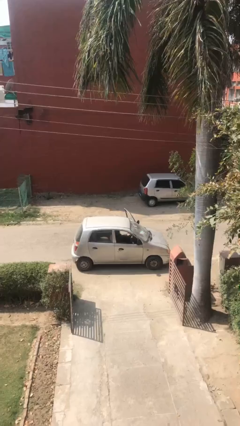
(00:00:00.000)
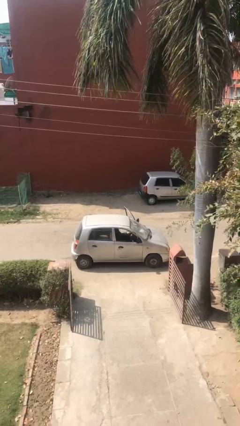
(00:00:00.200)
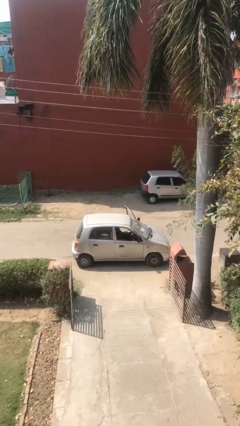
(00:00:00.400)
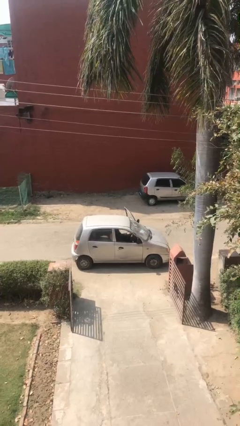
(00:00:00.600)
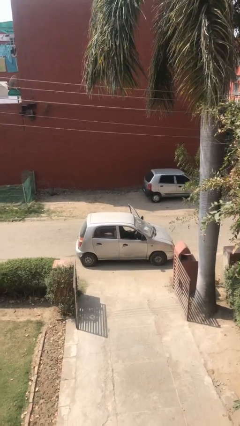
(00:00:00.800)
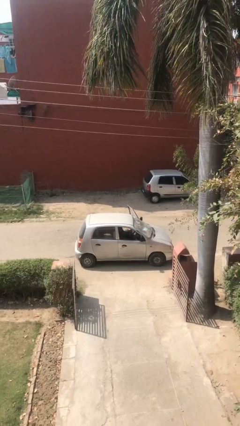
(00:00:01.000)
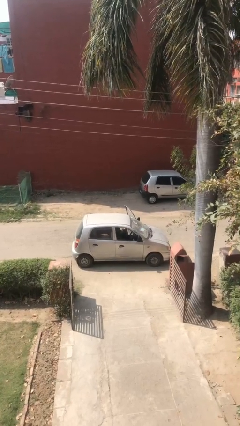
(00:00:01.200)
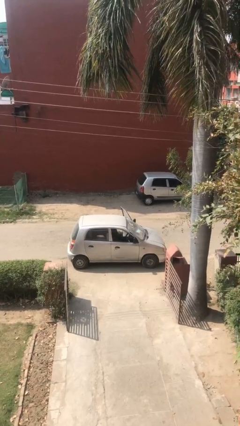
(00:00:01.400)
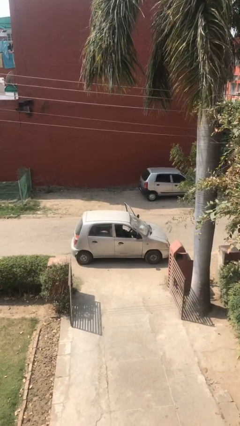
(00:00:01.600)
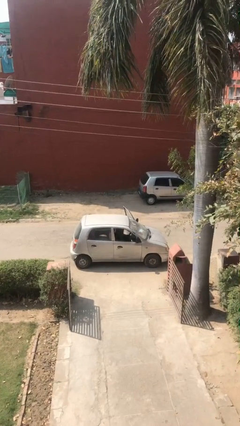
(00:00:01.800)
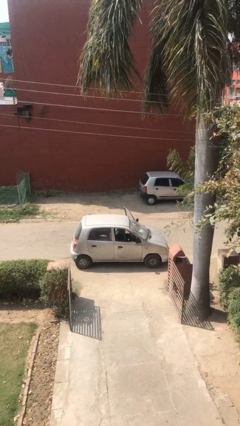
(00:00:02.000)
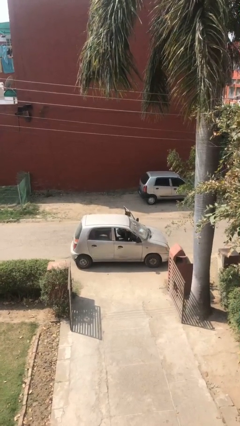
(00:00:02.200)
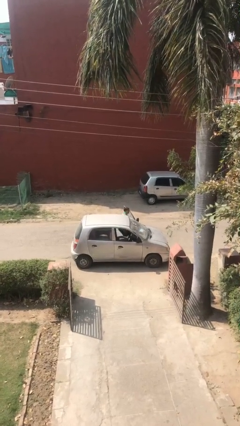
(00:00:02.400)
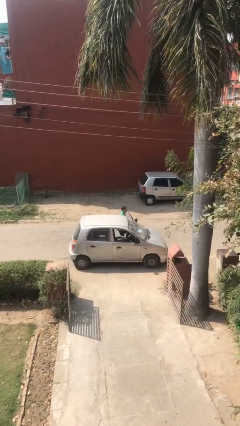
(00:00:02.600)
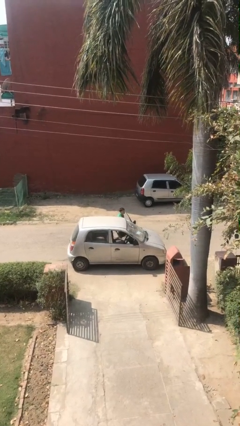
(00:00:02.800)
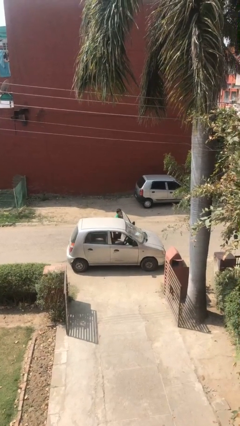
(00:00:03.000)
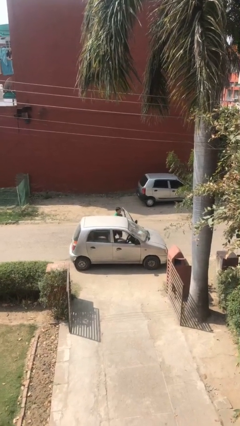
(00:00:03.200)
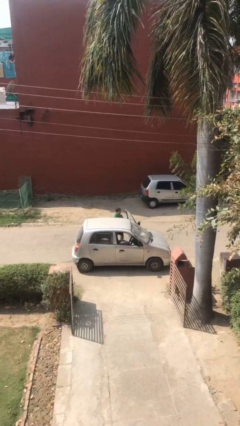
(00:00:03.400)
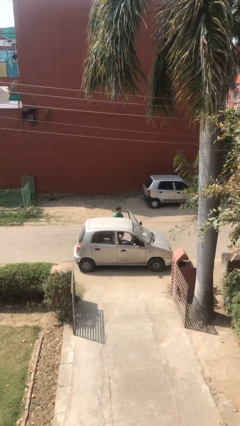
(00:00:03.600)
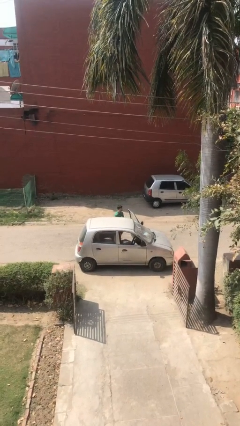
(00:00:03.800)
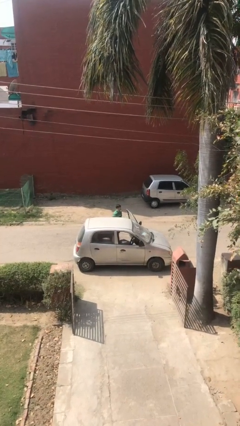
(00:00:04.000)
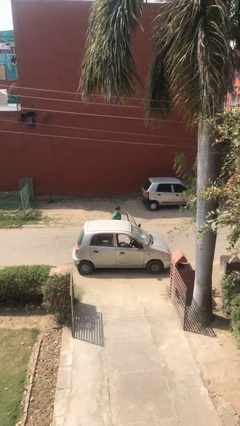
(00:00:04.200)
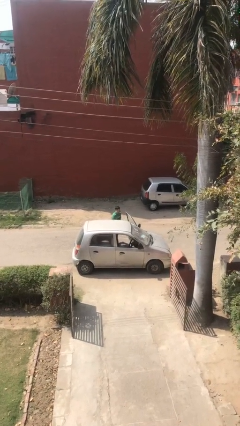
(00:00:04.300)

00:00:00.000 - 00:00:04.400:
person exits car

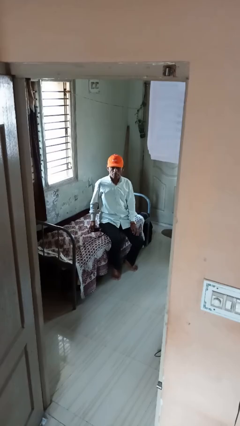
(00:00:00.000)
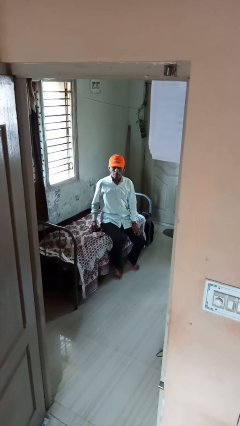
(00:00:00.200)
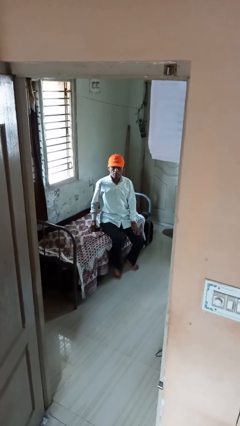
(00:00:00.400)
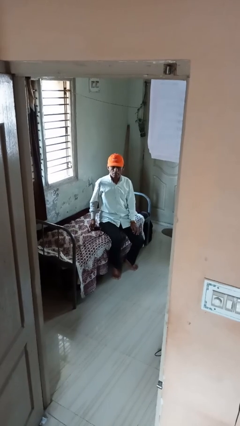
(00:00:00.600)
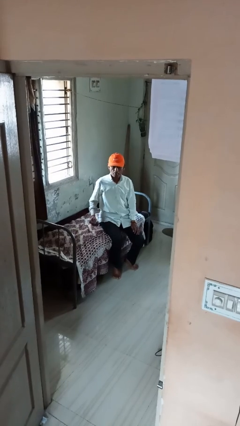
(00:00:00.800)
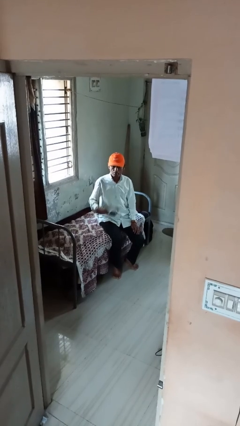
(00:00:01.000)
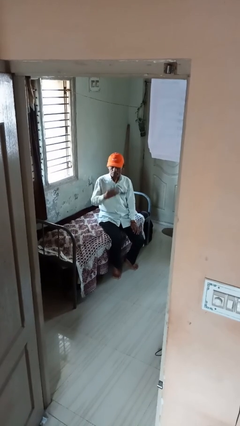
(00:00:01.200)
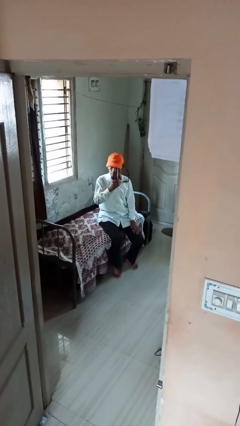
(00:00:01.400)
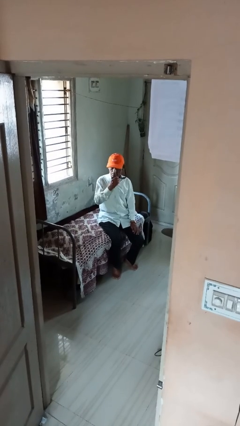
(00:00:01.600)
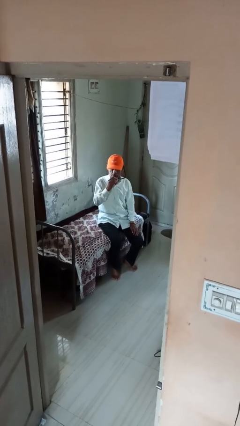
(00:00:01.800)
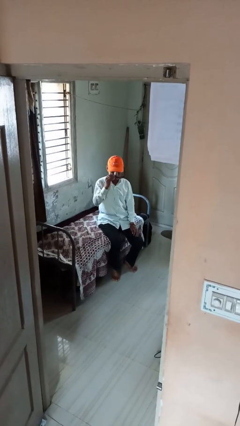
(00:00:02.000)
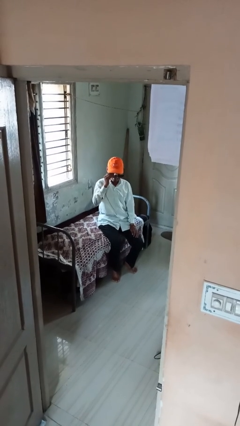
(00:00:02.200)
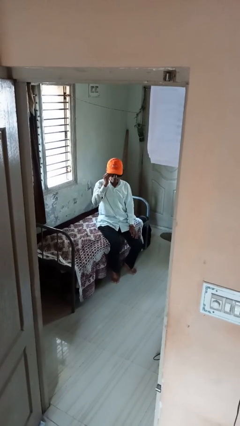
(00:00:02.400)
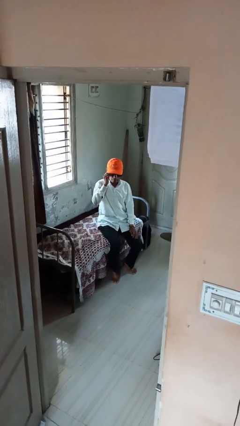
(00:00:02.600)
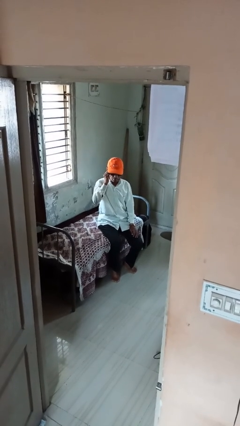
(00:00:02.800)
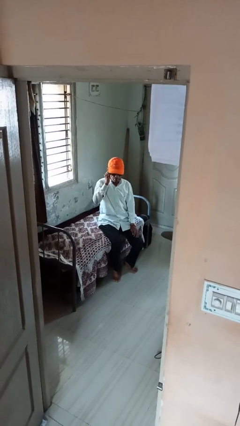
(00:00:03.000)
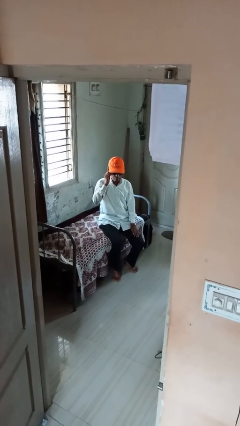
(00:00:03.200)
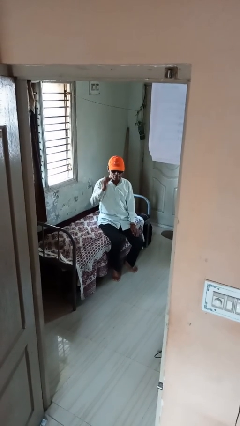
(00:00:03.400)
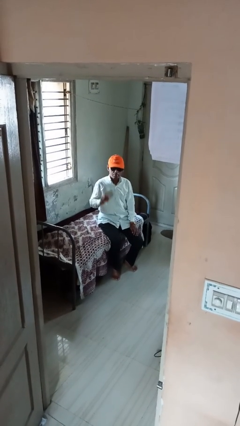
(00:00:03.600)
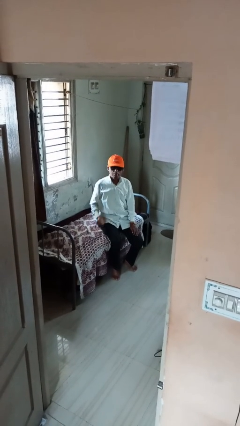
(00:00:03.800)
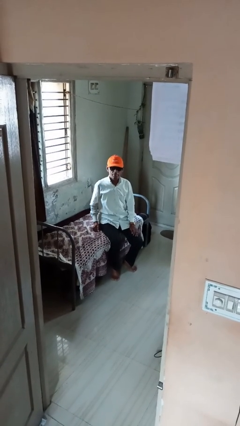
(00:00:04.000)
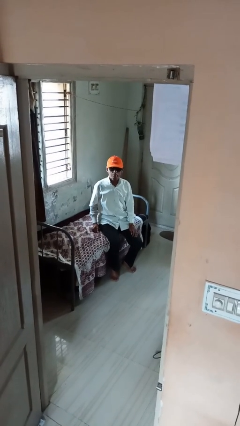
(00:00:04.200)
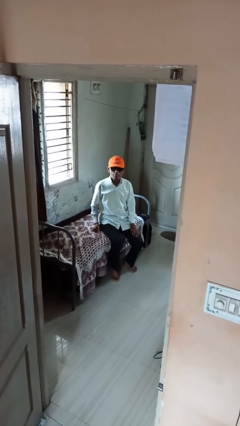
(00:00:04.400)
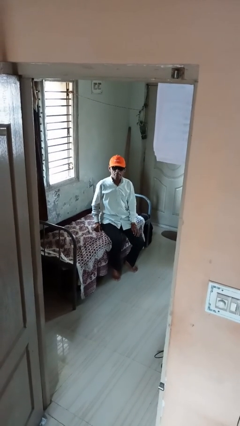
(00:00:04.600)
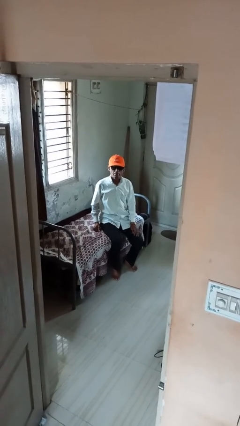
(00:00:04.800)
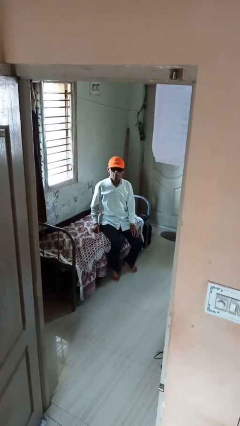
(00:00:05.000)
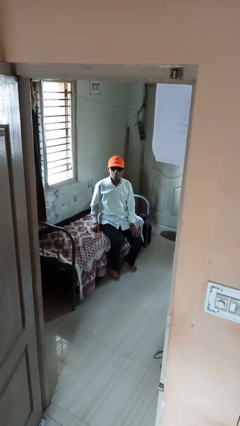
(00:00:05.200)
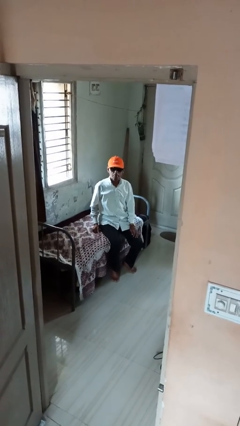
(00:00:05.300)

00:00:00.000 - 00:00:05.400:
person puts on sunglasses

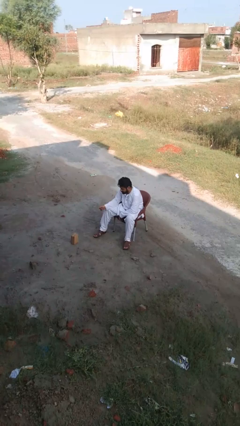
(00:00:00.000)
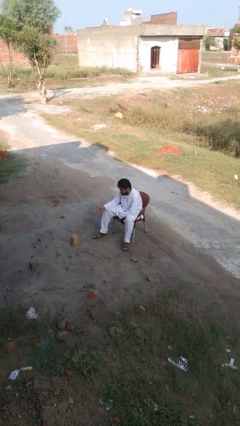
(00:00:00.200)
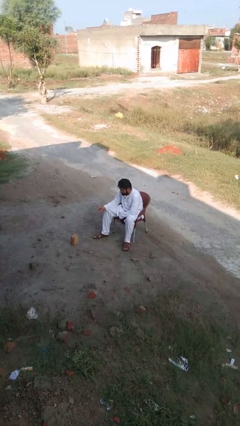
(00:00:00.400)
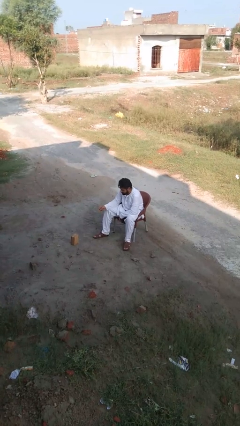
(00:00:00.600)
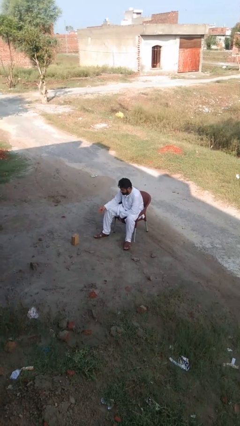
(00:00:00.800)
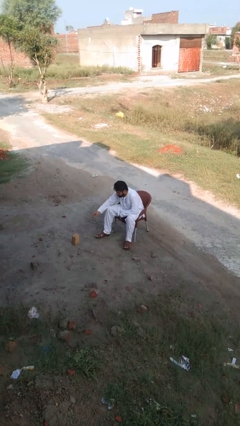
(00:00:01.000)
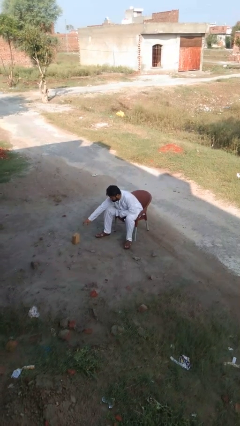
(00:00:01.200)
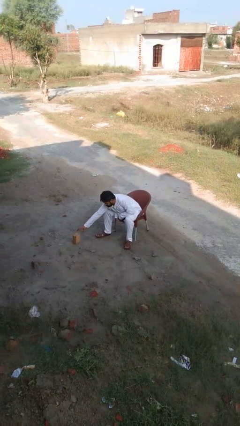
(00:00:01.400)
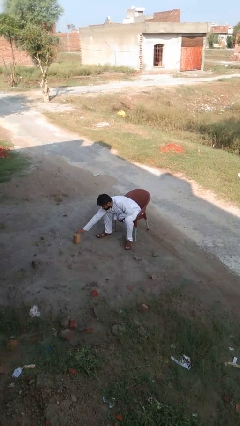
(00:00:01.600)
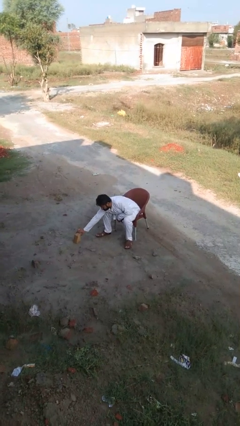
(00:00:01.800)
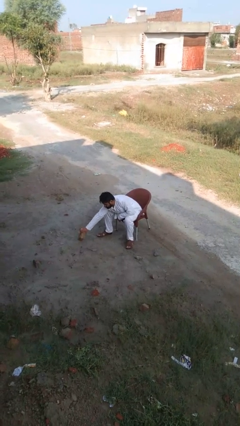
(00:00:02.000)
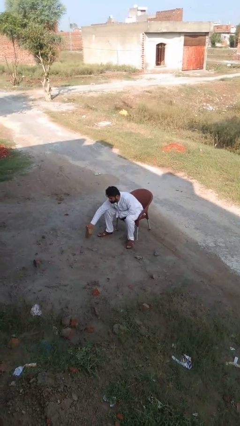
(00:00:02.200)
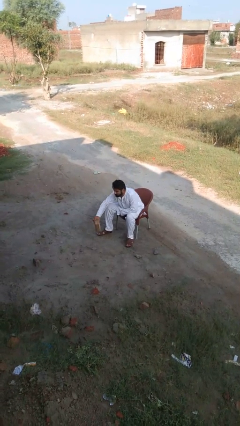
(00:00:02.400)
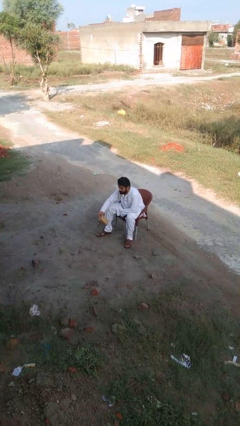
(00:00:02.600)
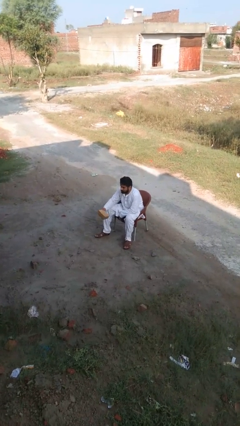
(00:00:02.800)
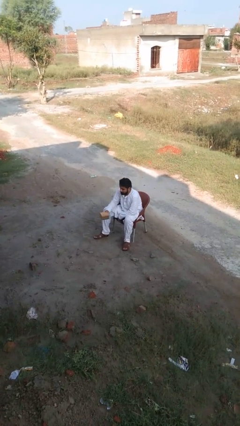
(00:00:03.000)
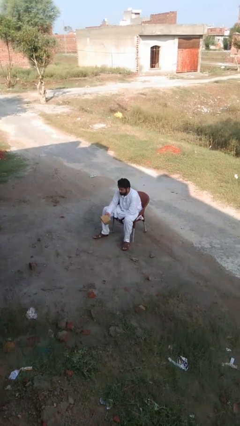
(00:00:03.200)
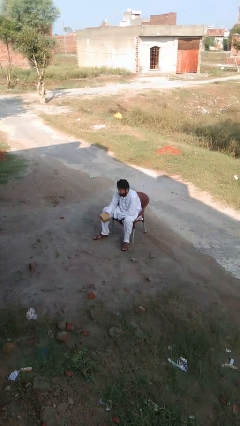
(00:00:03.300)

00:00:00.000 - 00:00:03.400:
person picks up object from floor

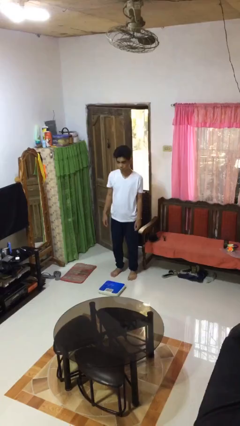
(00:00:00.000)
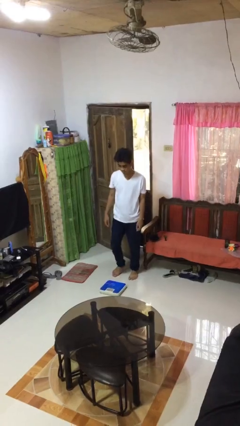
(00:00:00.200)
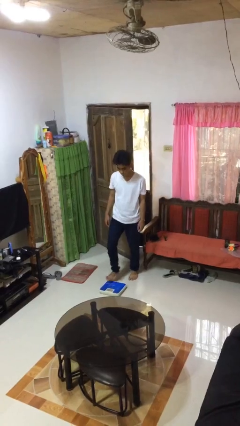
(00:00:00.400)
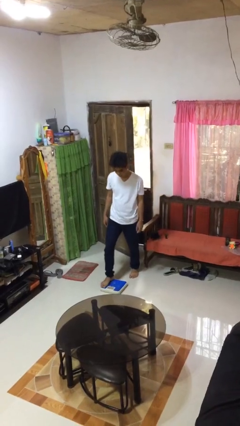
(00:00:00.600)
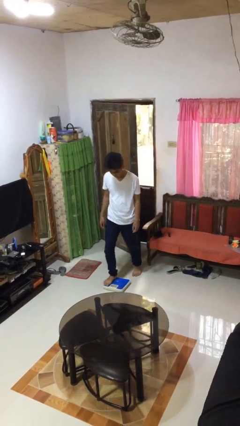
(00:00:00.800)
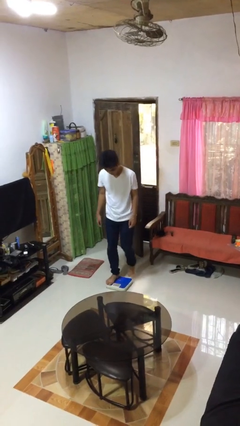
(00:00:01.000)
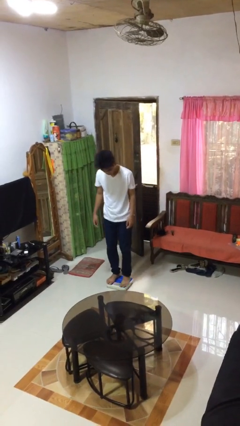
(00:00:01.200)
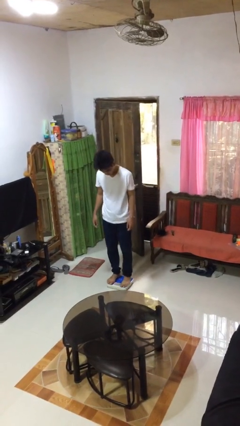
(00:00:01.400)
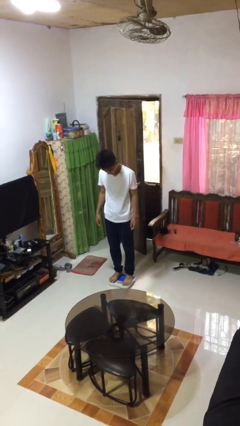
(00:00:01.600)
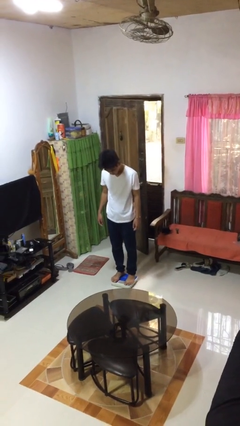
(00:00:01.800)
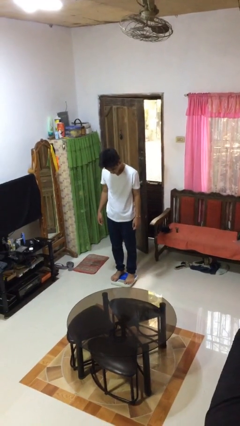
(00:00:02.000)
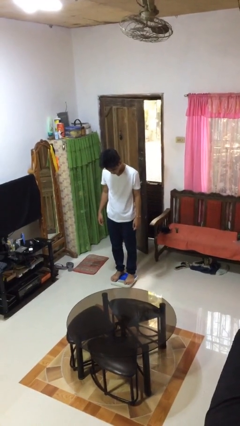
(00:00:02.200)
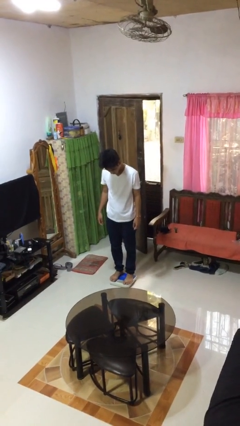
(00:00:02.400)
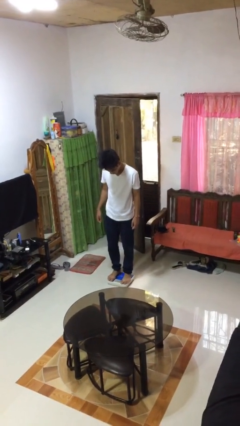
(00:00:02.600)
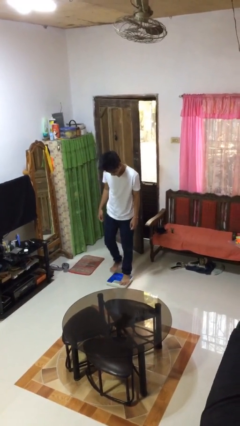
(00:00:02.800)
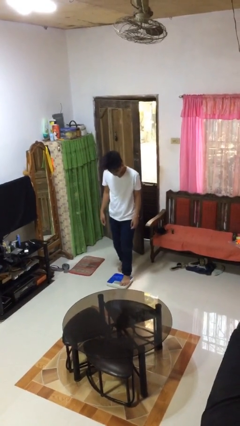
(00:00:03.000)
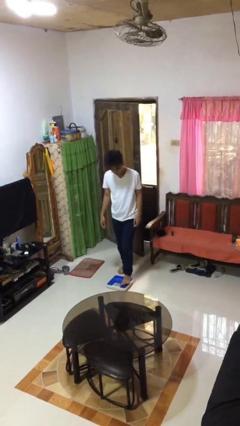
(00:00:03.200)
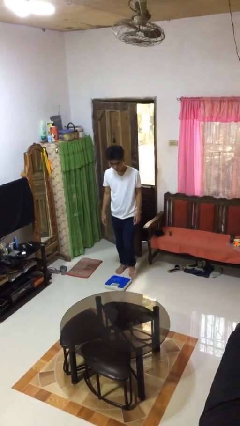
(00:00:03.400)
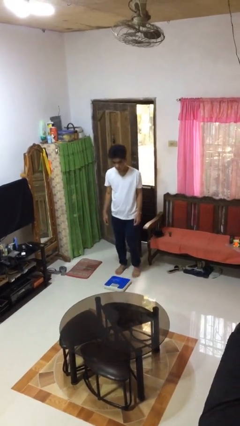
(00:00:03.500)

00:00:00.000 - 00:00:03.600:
person uses bodyweight scale

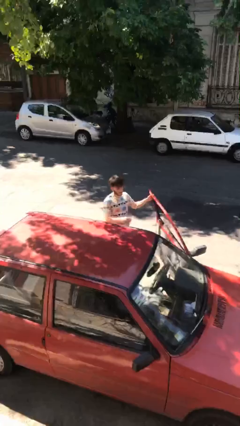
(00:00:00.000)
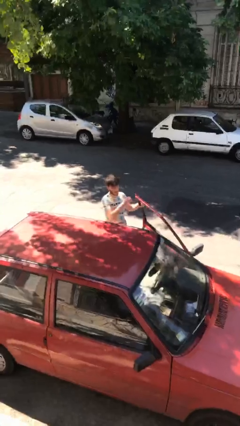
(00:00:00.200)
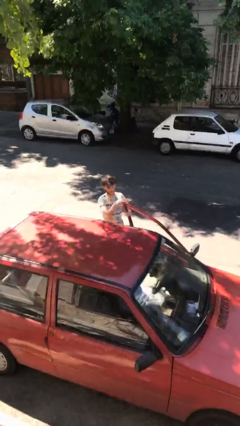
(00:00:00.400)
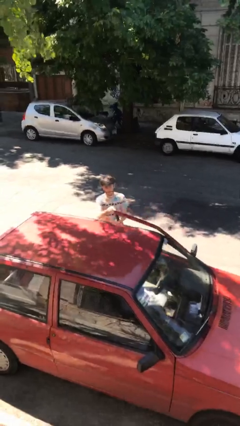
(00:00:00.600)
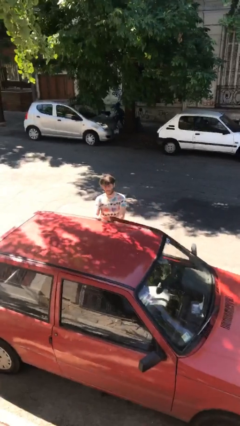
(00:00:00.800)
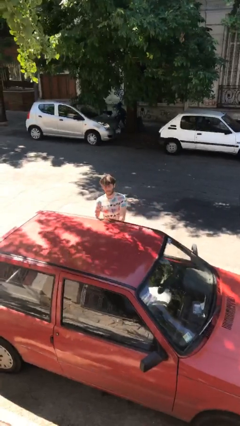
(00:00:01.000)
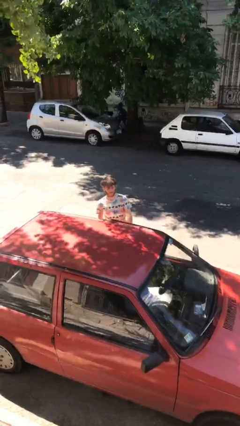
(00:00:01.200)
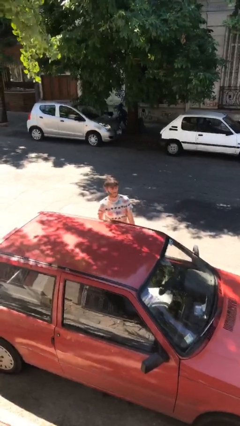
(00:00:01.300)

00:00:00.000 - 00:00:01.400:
person closes car door
